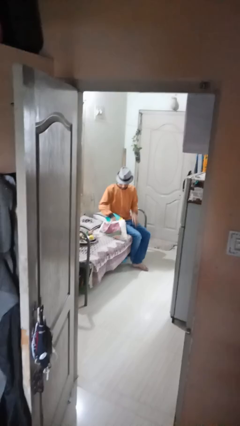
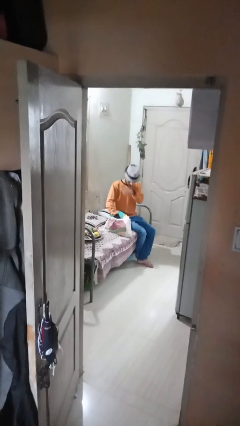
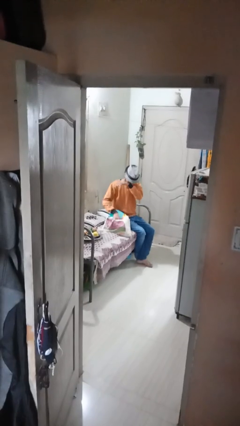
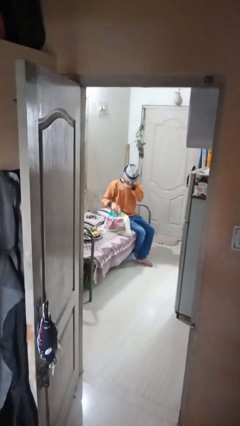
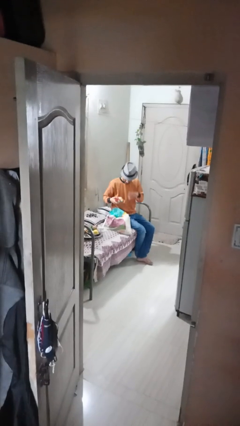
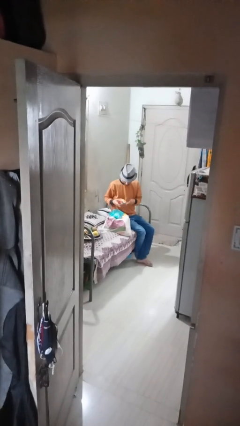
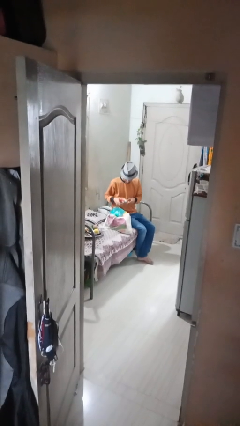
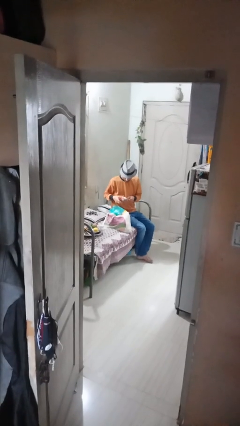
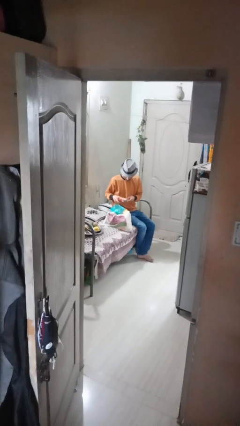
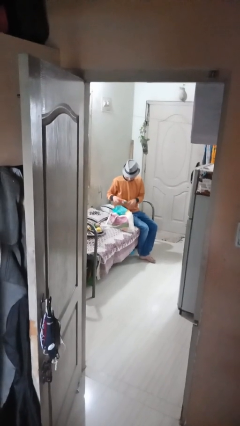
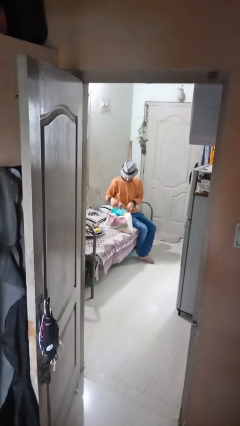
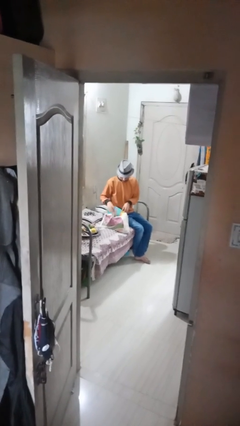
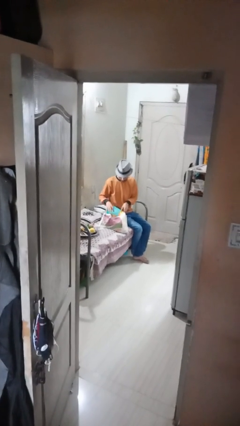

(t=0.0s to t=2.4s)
person searches in bag

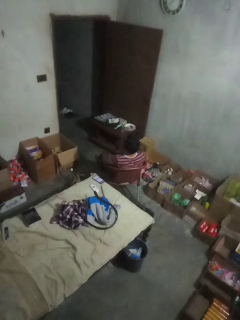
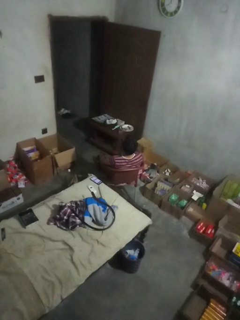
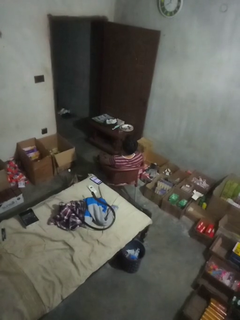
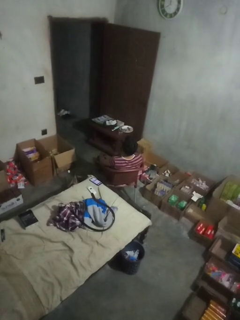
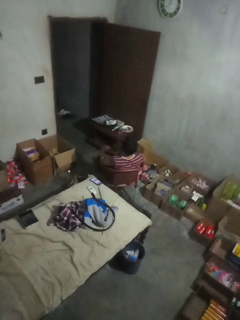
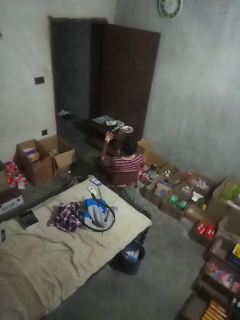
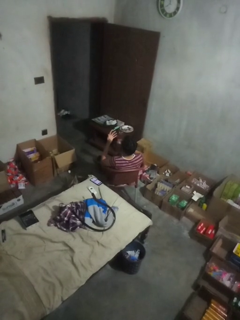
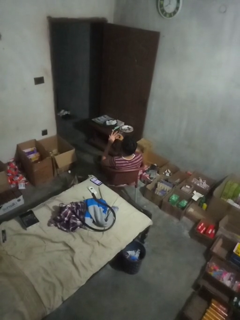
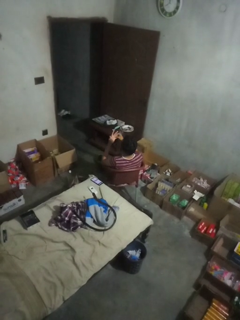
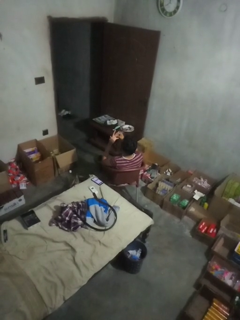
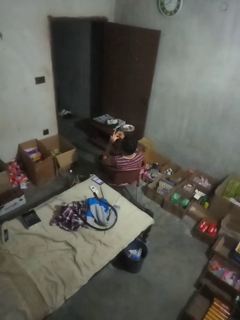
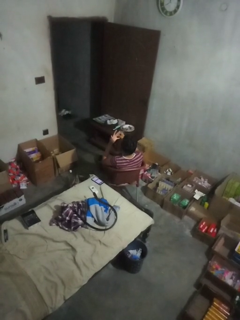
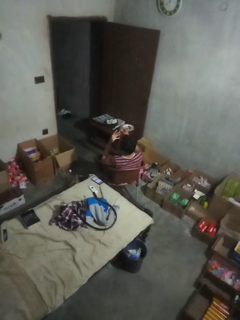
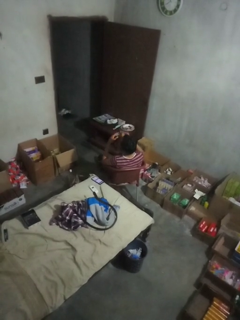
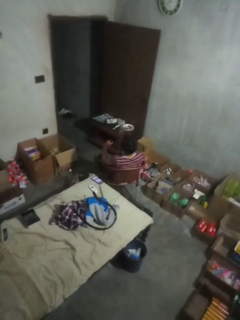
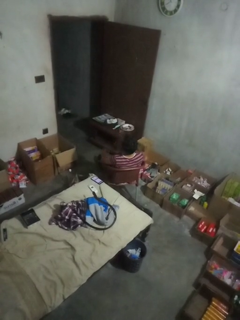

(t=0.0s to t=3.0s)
person takes off ring

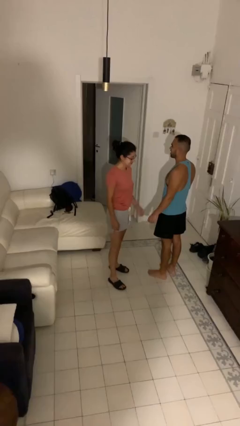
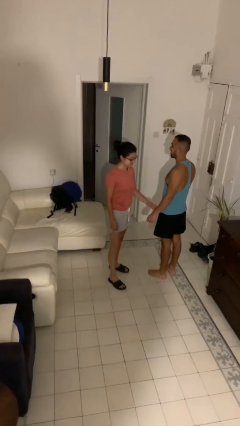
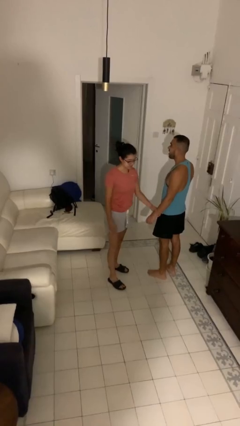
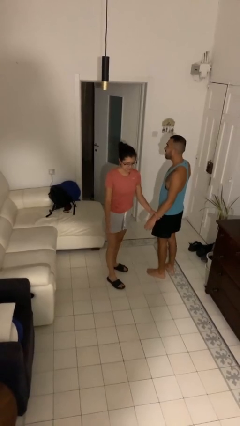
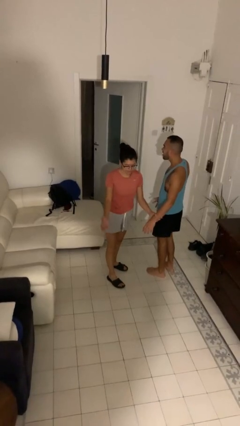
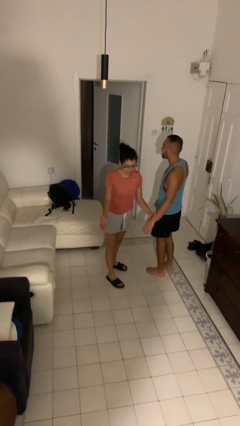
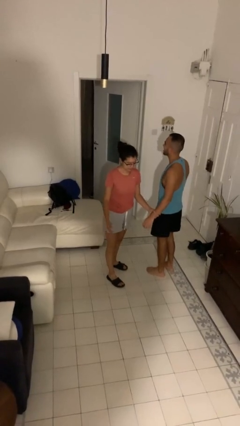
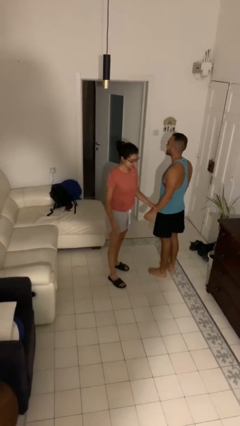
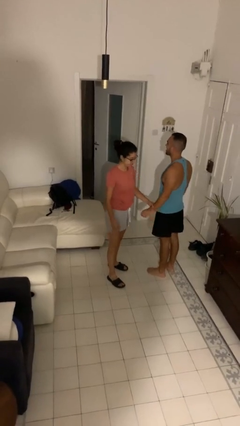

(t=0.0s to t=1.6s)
person grabs person by forearm

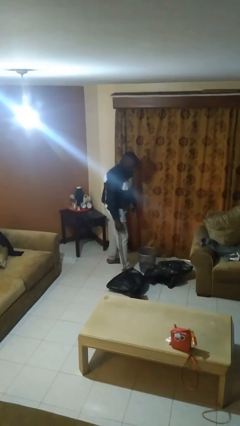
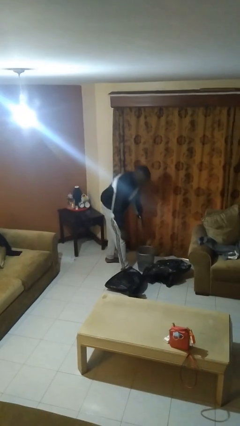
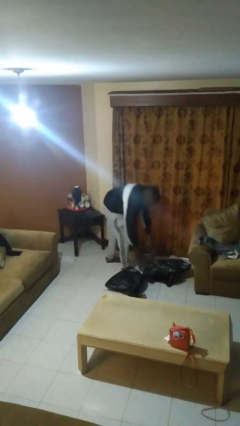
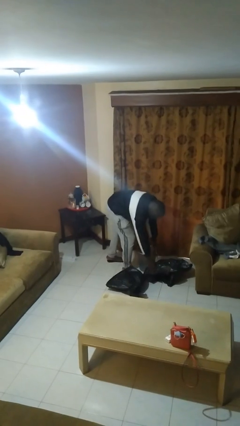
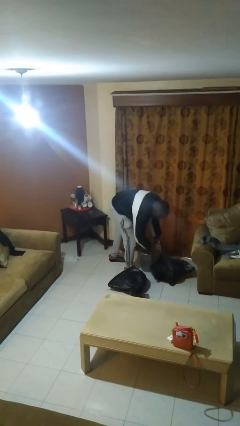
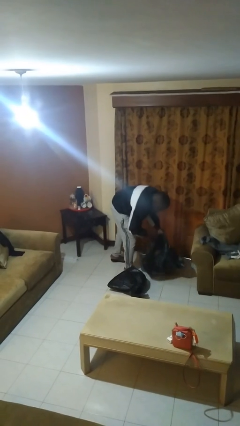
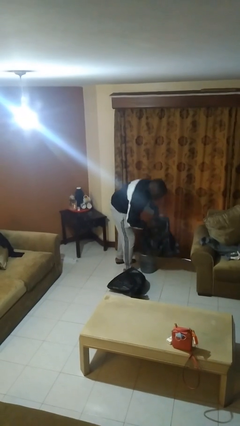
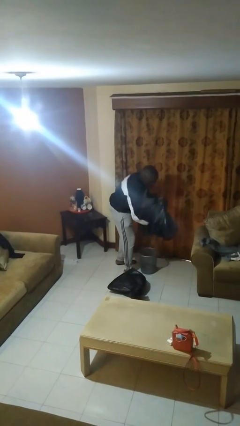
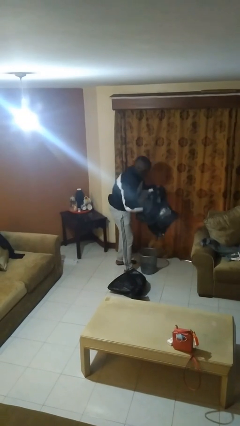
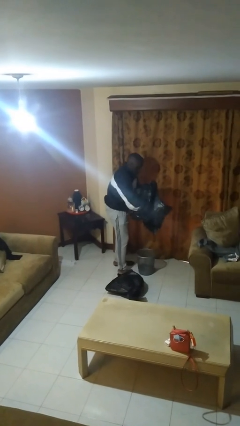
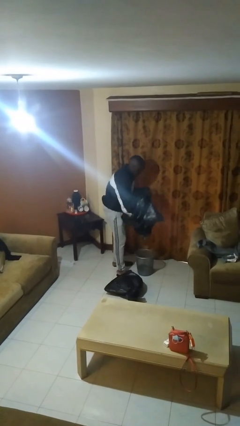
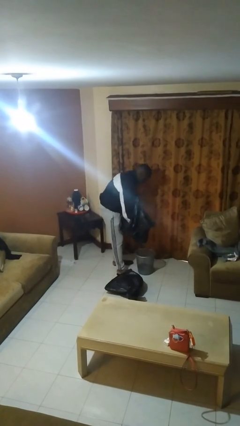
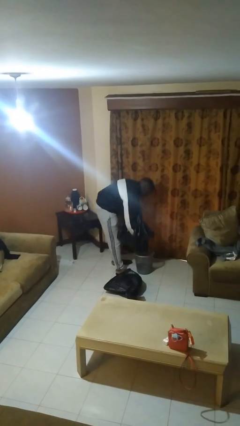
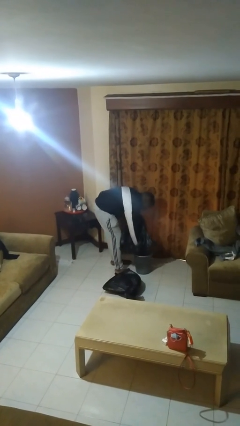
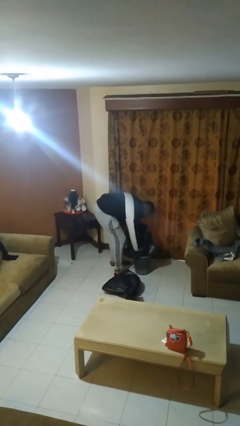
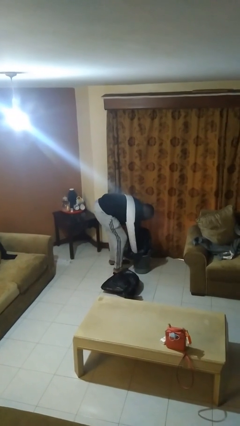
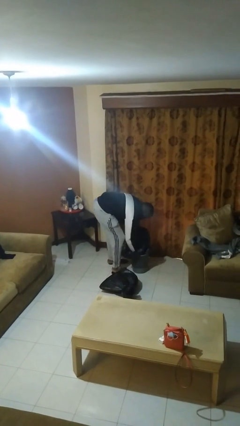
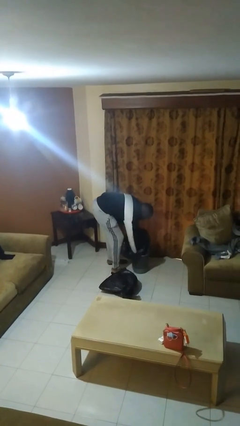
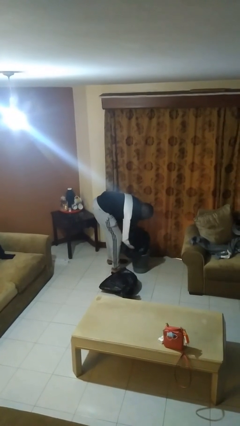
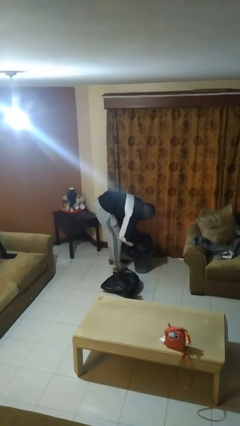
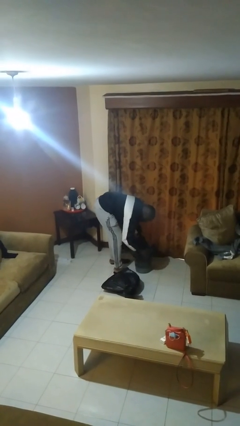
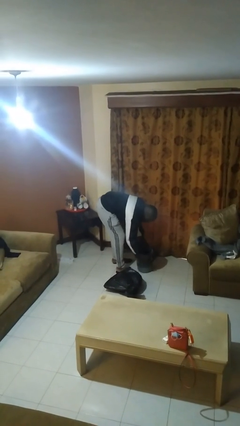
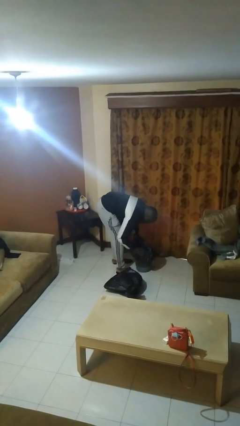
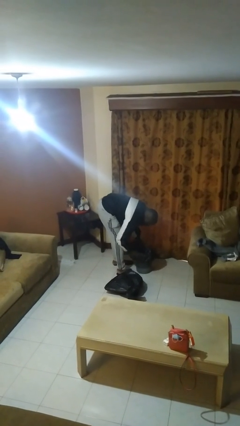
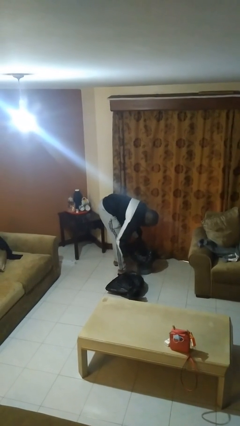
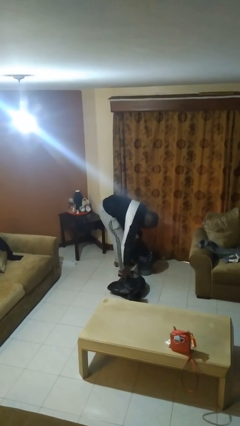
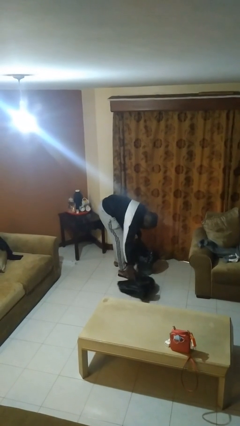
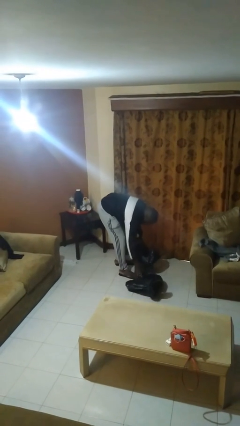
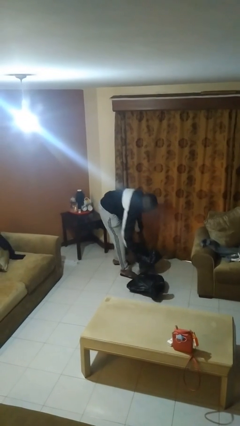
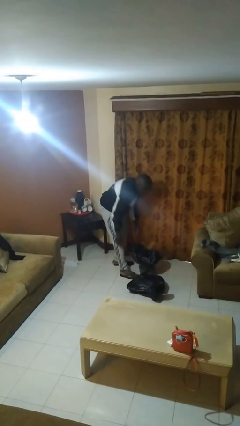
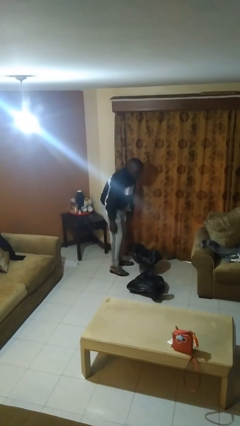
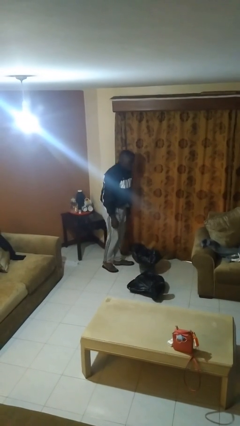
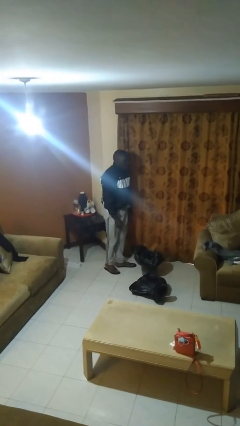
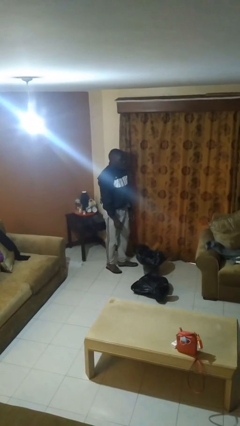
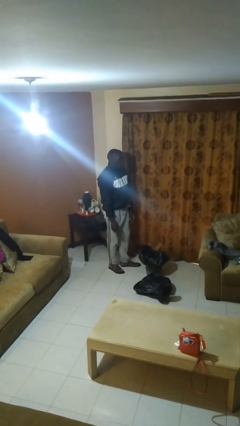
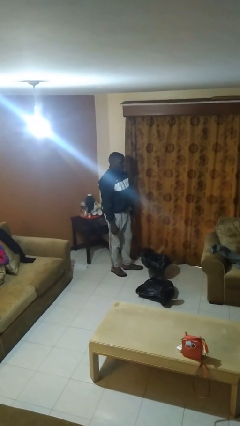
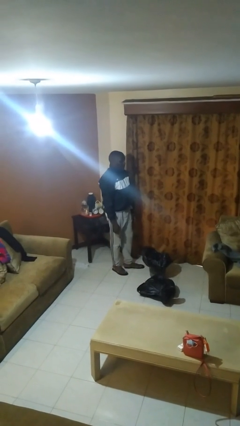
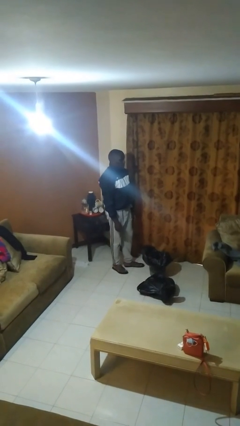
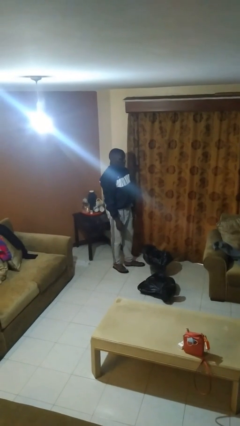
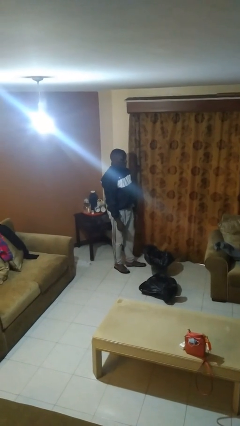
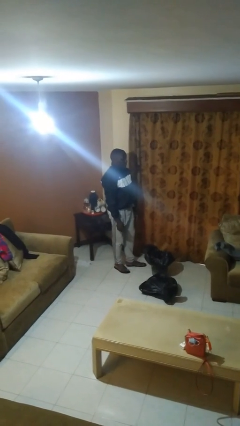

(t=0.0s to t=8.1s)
person inserts trashbag into trashcan

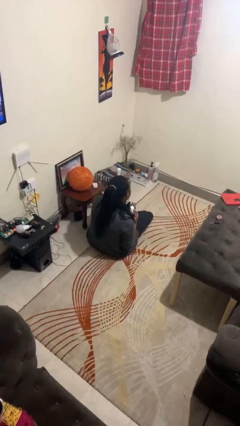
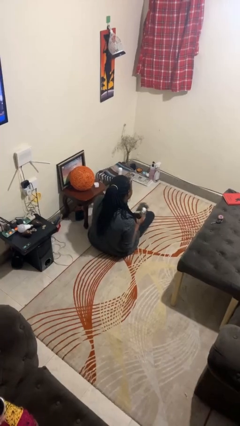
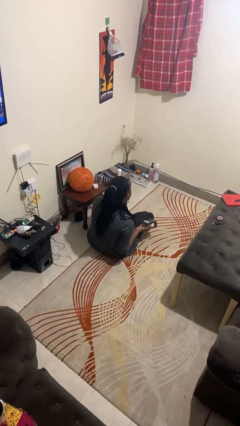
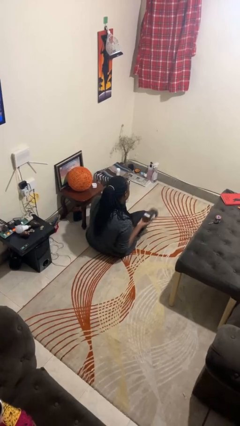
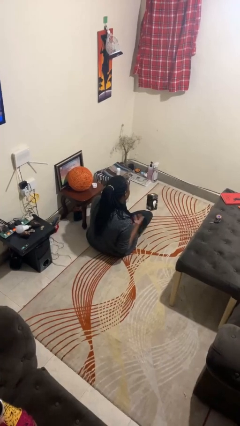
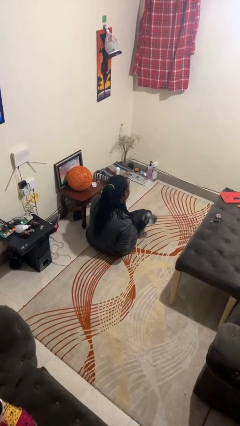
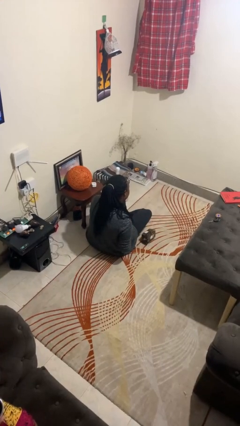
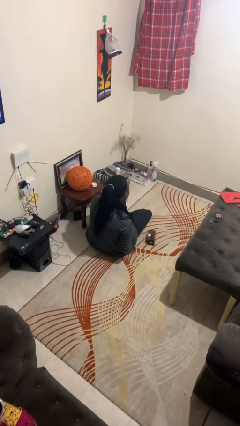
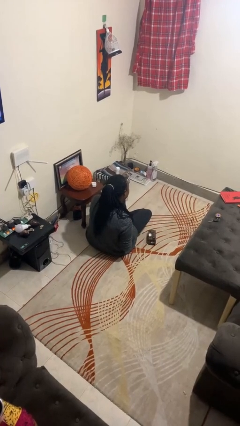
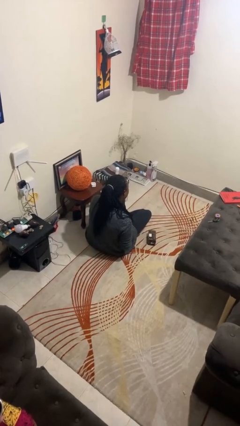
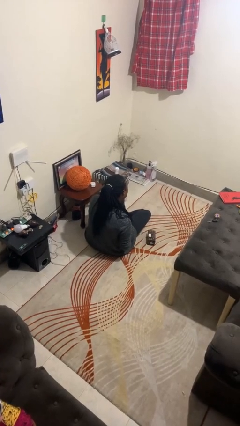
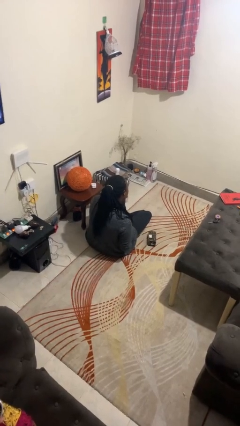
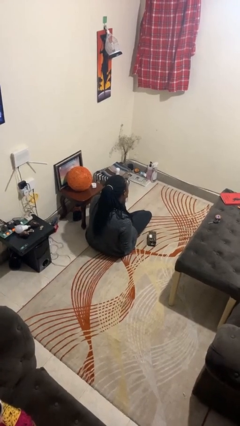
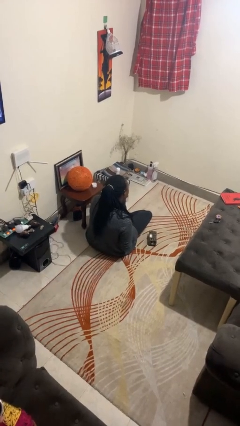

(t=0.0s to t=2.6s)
person throws object into air

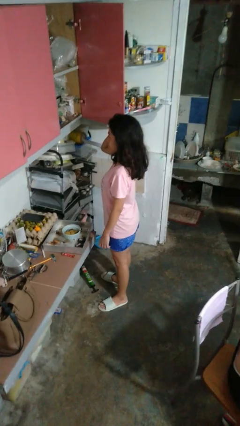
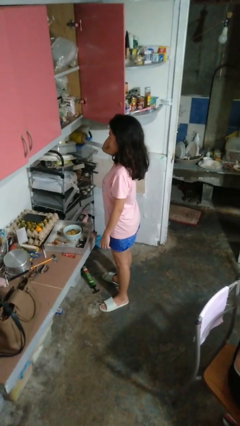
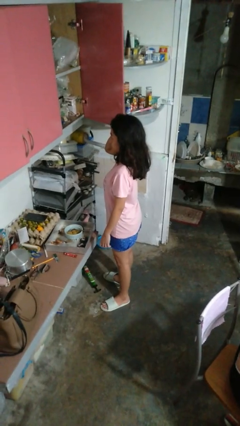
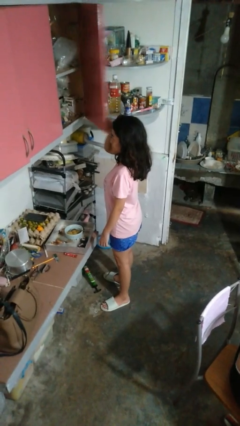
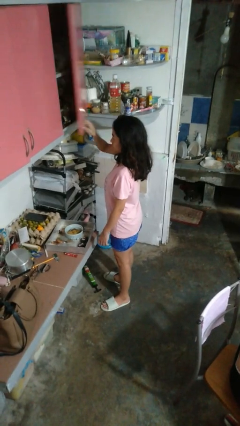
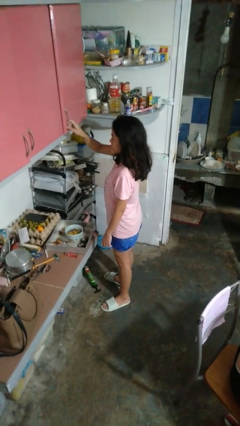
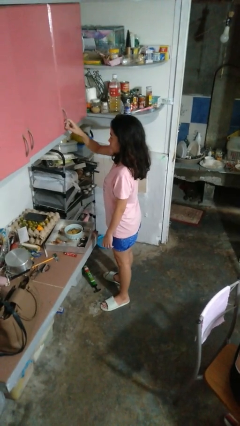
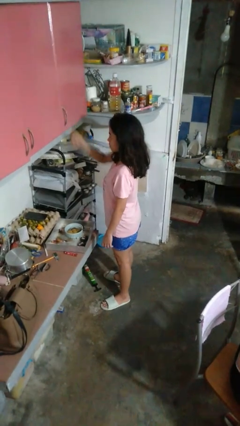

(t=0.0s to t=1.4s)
person closes cabinet
